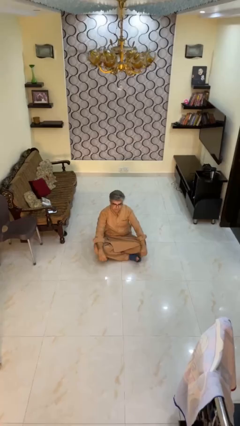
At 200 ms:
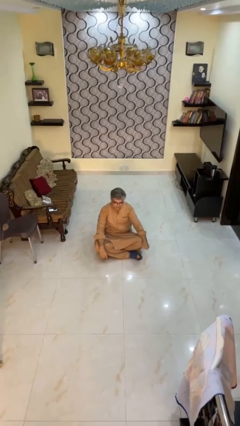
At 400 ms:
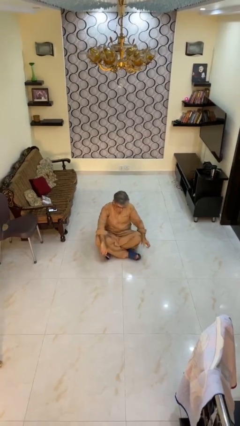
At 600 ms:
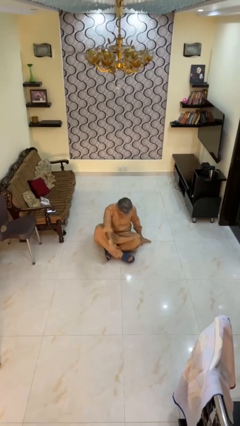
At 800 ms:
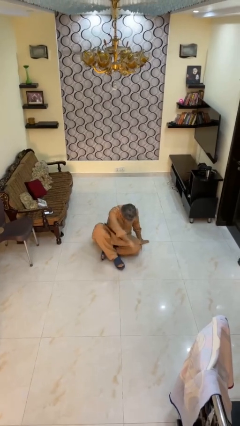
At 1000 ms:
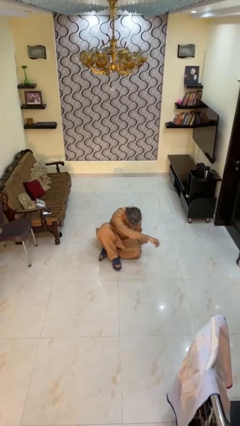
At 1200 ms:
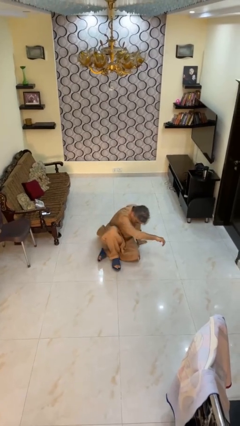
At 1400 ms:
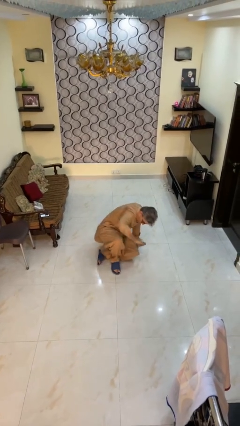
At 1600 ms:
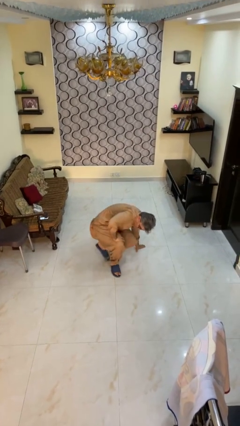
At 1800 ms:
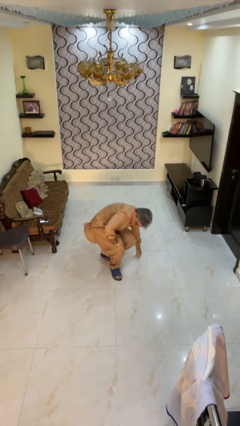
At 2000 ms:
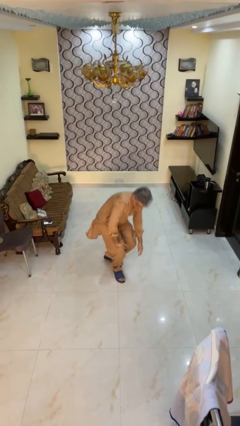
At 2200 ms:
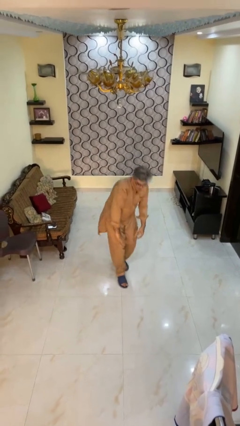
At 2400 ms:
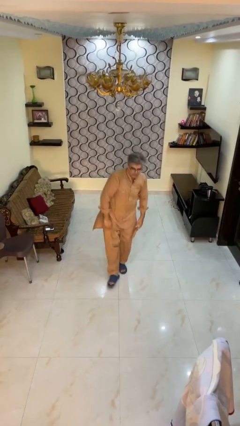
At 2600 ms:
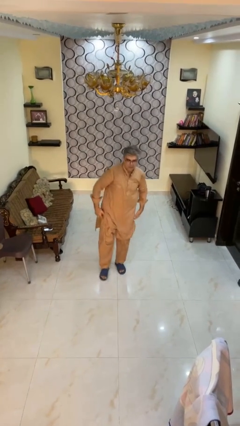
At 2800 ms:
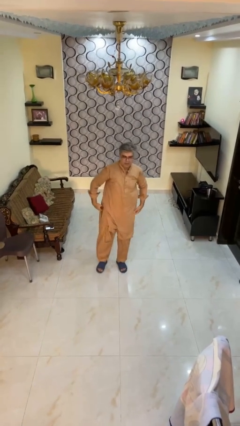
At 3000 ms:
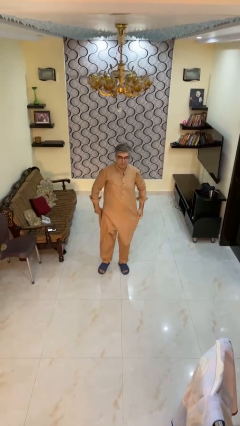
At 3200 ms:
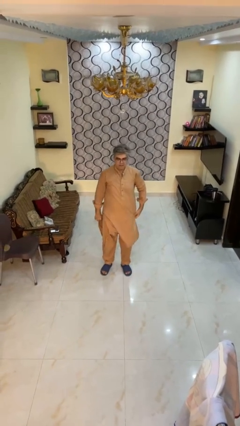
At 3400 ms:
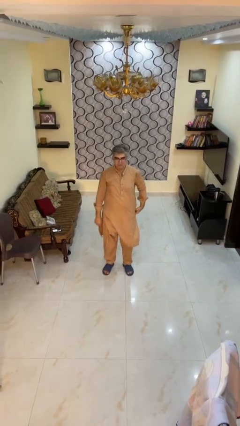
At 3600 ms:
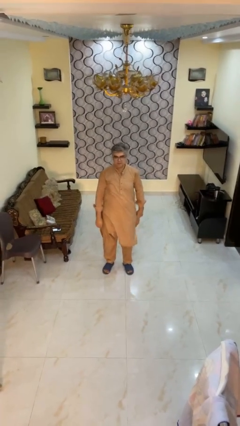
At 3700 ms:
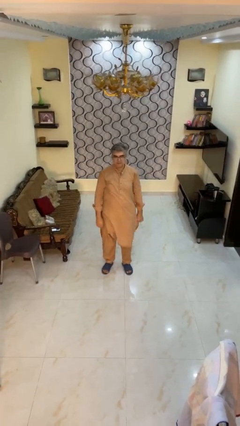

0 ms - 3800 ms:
person stands up from floor

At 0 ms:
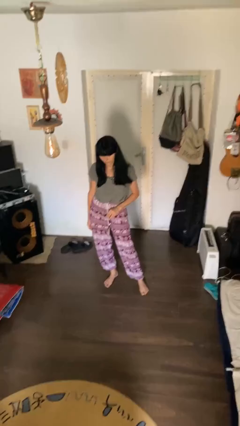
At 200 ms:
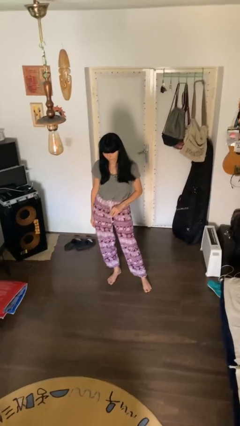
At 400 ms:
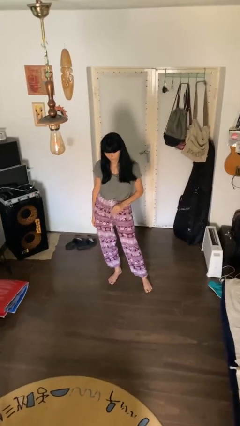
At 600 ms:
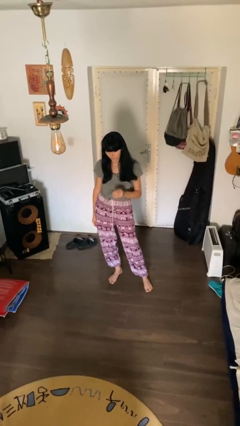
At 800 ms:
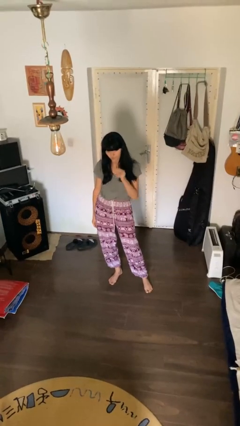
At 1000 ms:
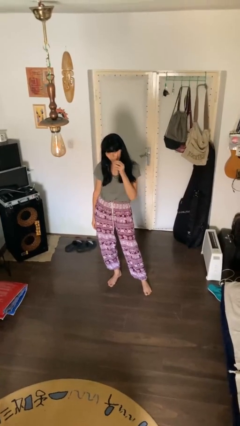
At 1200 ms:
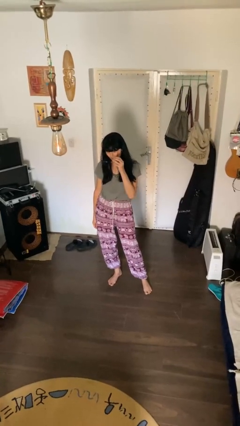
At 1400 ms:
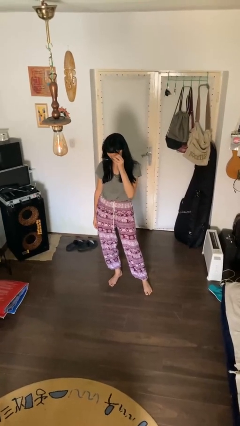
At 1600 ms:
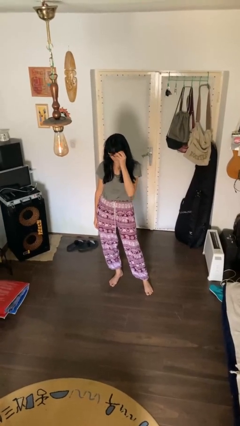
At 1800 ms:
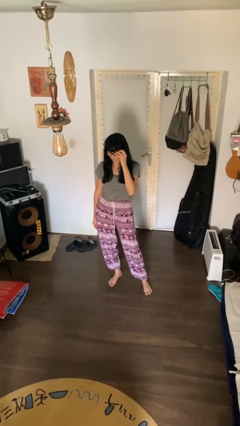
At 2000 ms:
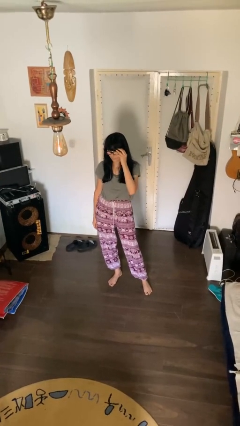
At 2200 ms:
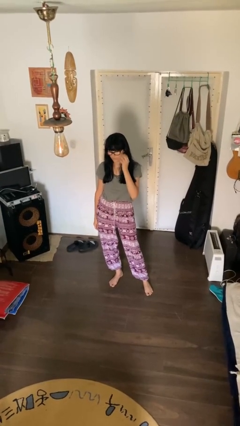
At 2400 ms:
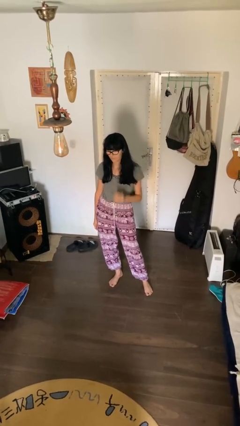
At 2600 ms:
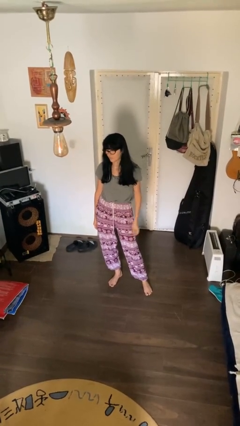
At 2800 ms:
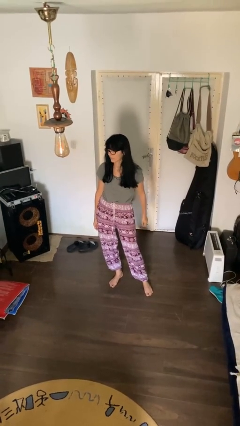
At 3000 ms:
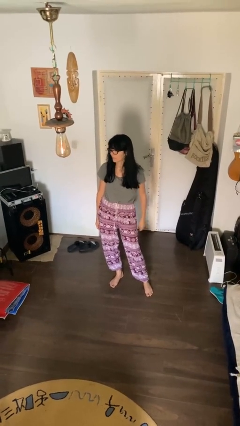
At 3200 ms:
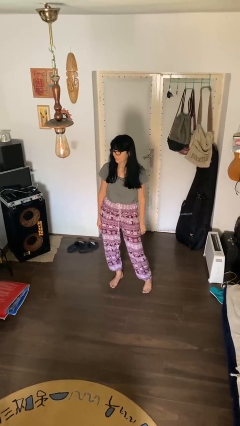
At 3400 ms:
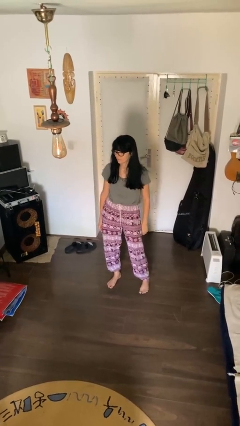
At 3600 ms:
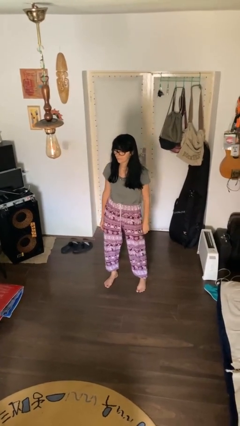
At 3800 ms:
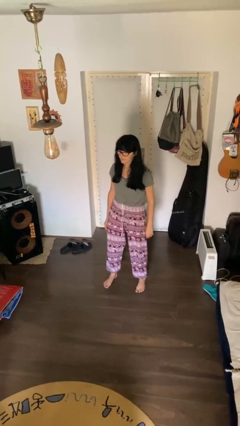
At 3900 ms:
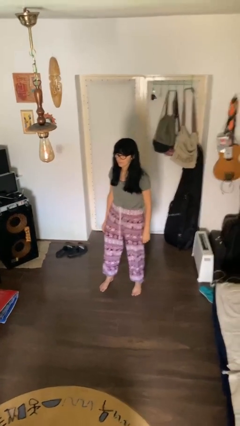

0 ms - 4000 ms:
person puts on glasses

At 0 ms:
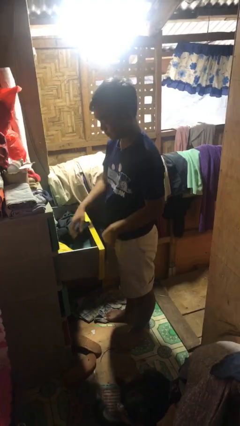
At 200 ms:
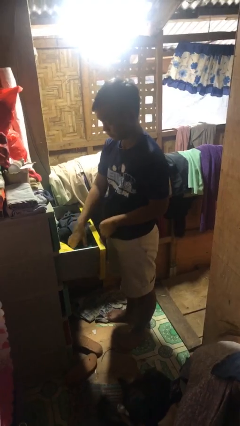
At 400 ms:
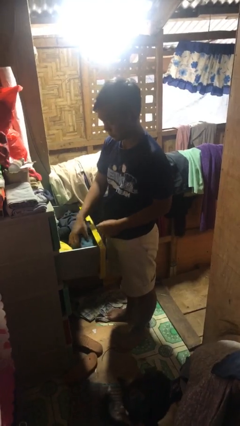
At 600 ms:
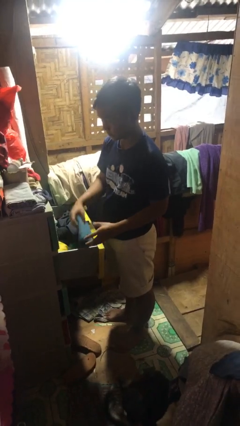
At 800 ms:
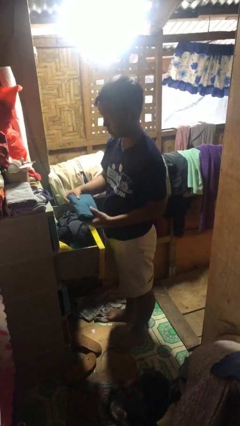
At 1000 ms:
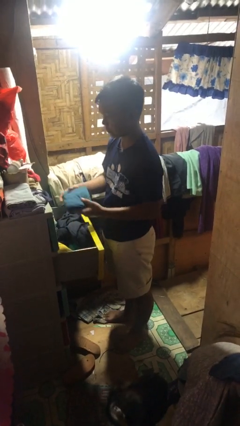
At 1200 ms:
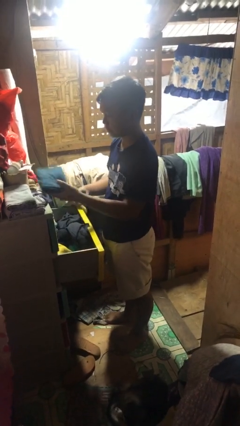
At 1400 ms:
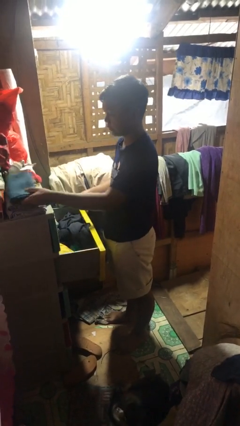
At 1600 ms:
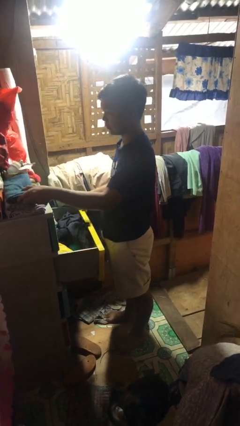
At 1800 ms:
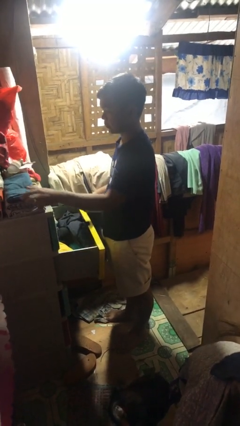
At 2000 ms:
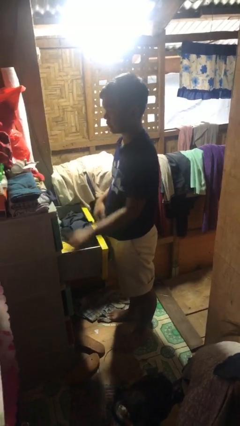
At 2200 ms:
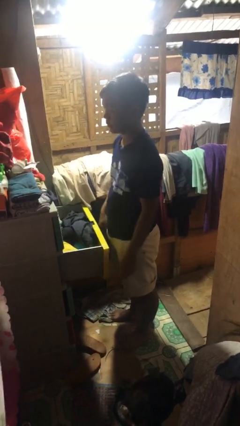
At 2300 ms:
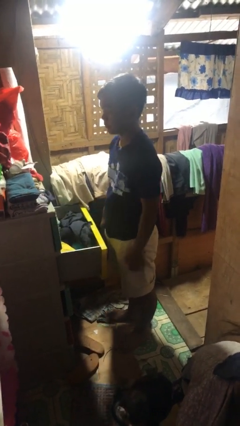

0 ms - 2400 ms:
person takes clothes from dresser

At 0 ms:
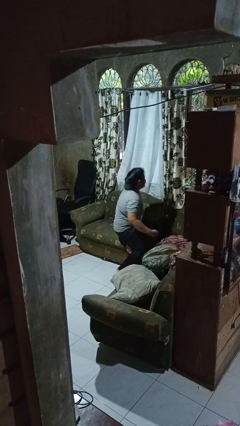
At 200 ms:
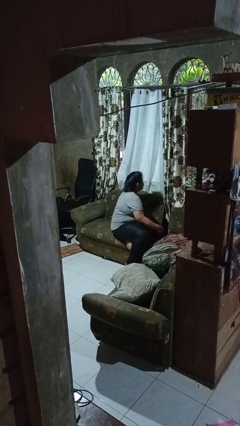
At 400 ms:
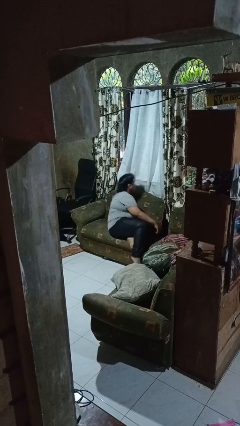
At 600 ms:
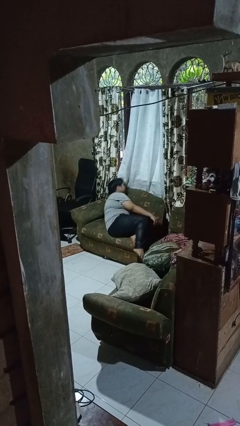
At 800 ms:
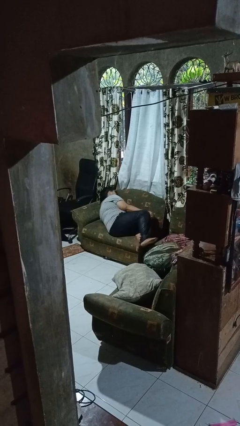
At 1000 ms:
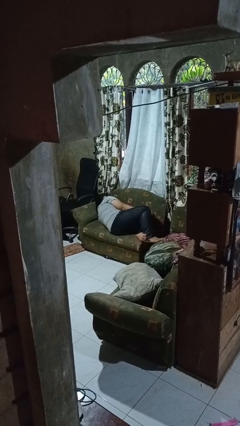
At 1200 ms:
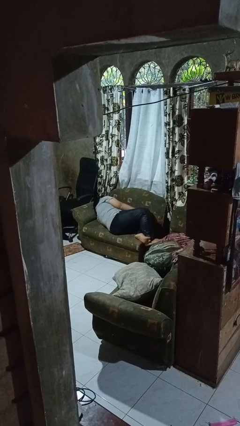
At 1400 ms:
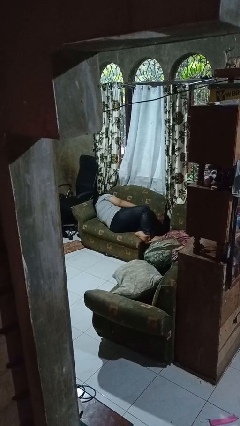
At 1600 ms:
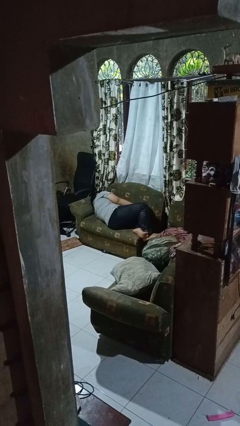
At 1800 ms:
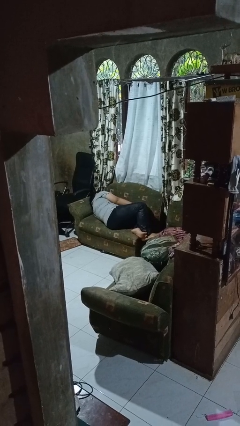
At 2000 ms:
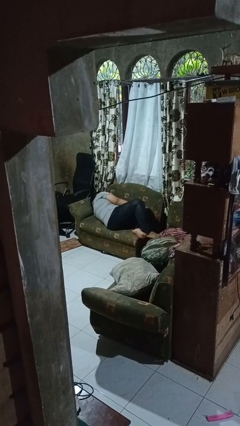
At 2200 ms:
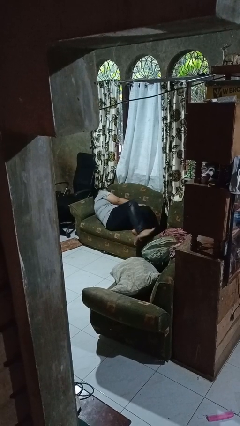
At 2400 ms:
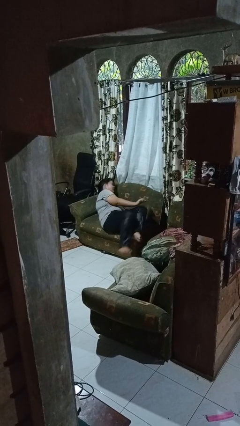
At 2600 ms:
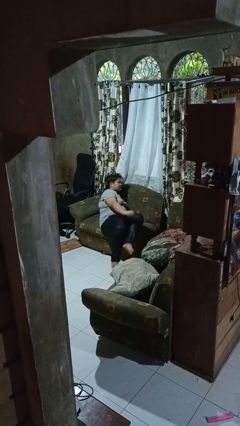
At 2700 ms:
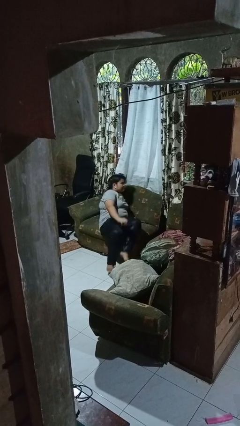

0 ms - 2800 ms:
person lies down on couch

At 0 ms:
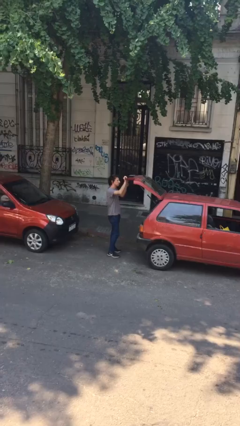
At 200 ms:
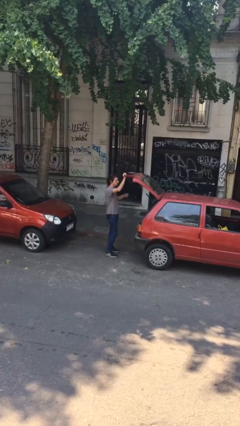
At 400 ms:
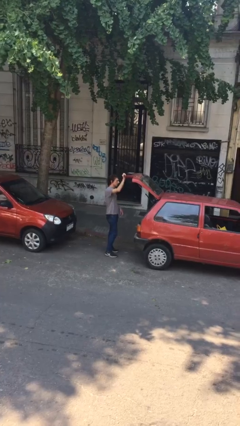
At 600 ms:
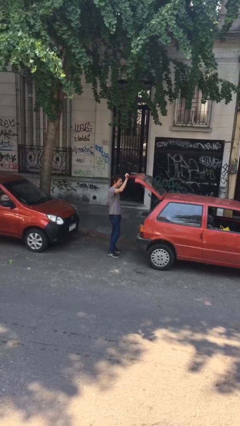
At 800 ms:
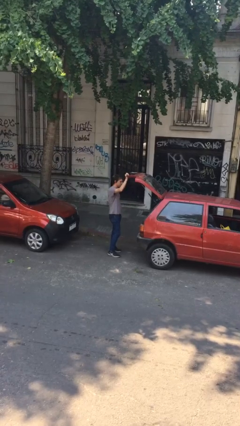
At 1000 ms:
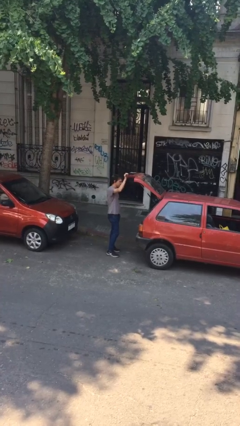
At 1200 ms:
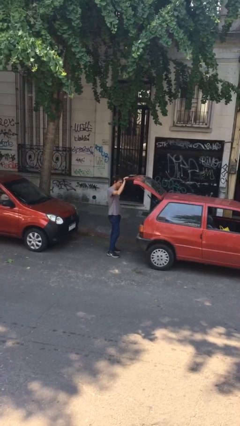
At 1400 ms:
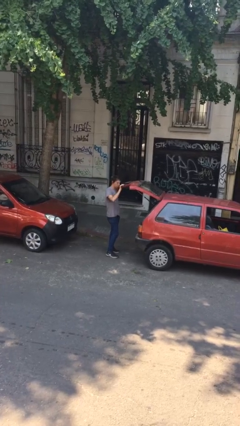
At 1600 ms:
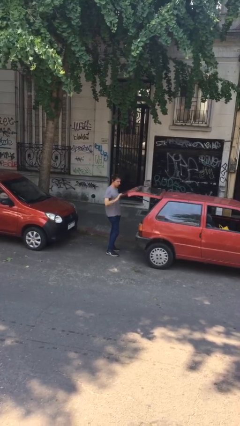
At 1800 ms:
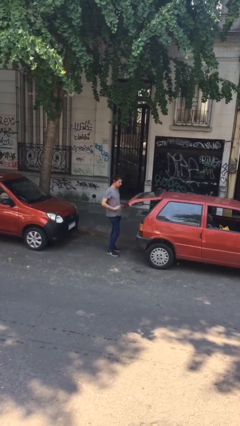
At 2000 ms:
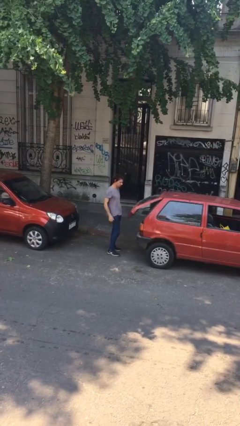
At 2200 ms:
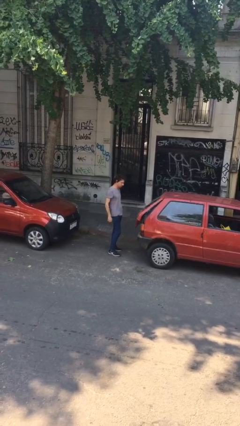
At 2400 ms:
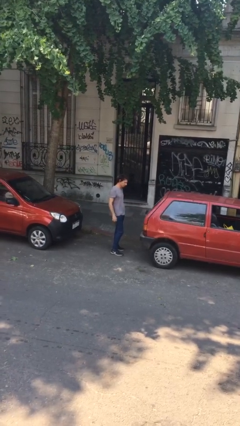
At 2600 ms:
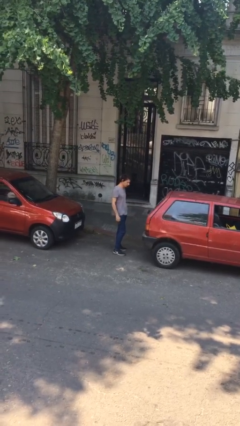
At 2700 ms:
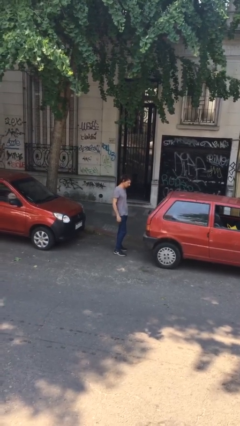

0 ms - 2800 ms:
person closes car trunk

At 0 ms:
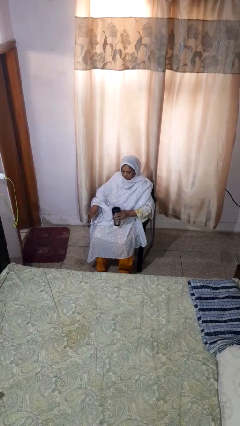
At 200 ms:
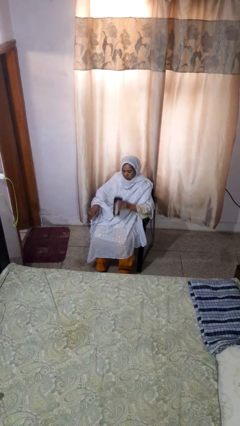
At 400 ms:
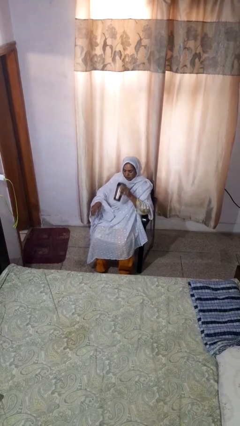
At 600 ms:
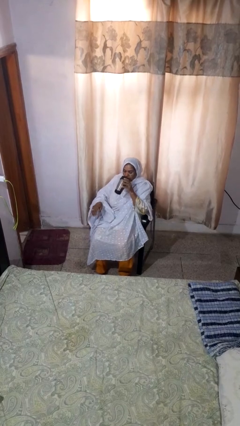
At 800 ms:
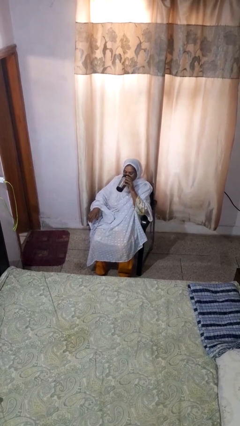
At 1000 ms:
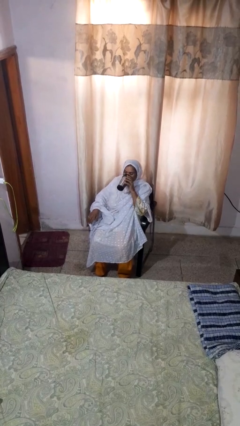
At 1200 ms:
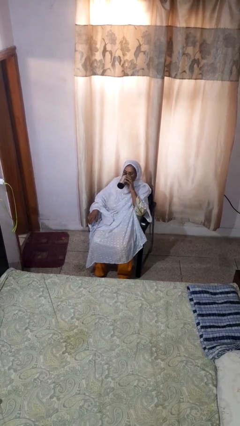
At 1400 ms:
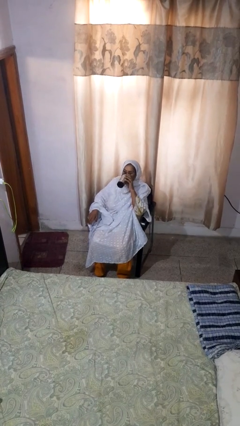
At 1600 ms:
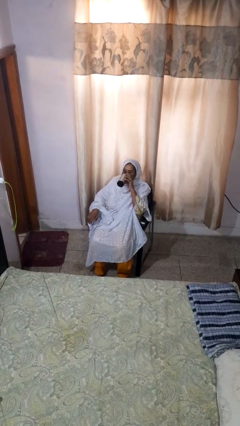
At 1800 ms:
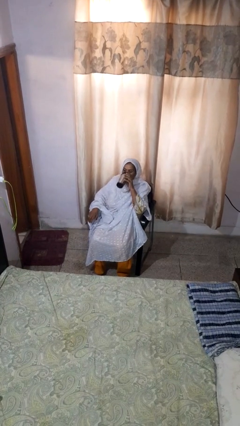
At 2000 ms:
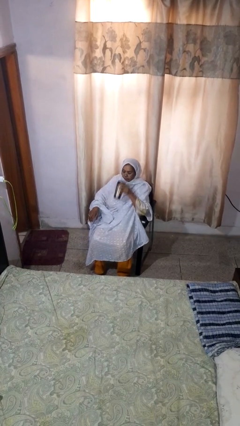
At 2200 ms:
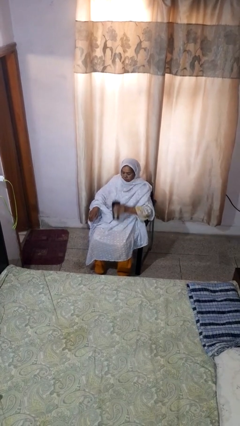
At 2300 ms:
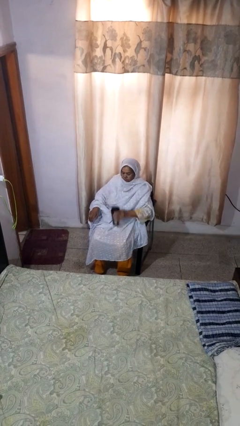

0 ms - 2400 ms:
person drinks from beverage can
